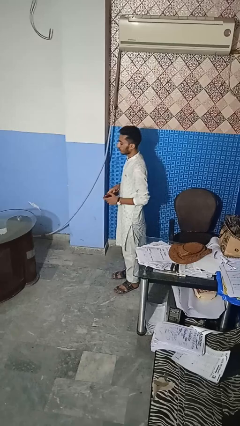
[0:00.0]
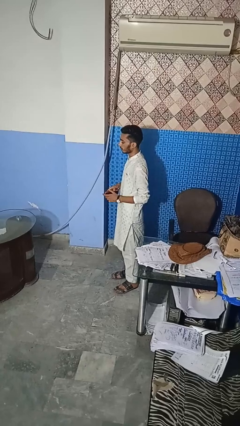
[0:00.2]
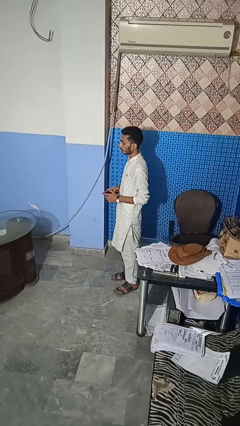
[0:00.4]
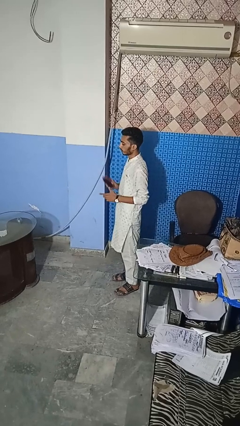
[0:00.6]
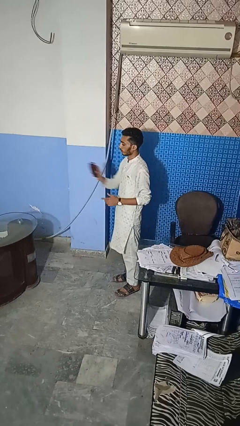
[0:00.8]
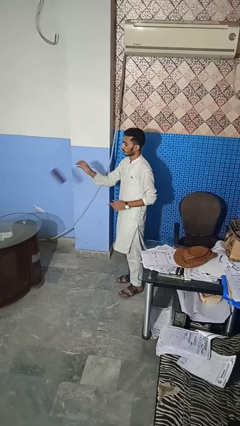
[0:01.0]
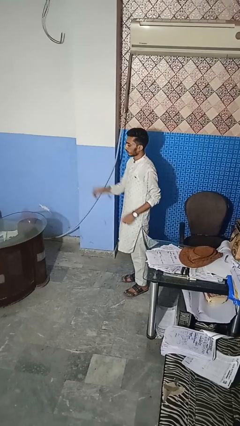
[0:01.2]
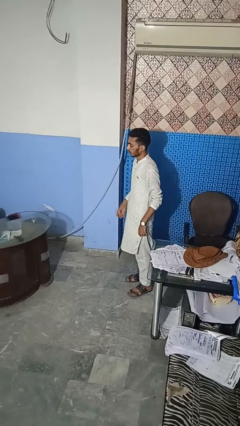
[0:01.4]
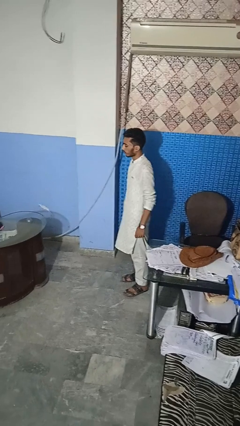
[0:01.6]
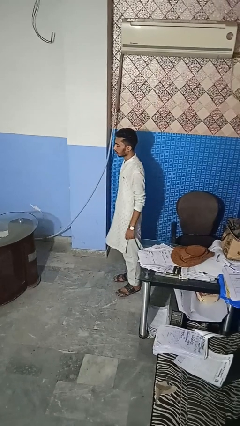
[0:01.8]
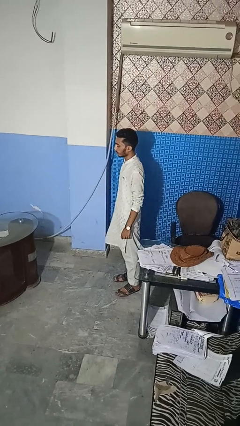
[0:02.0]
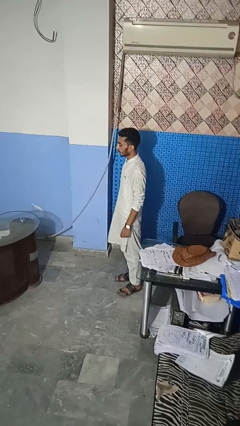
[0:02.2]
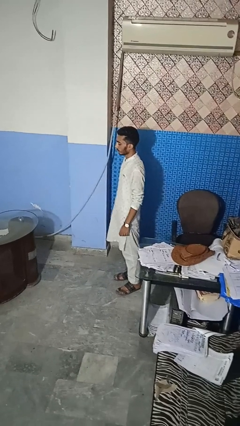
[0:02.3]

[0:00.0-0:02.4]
person throws object on table

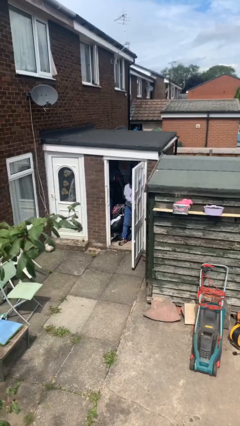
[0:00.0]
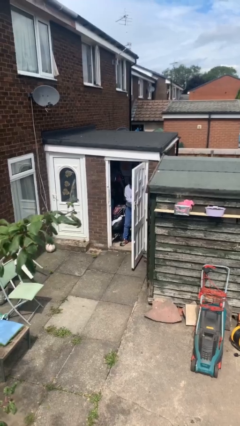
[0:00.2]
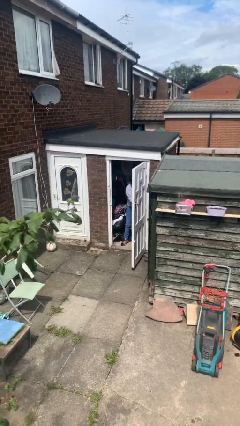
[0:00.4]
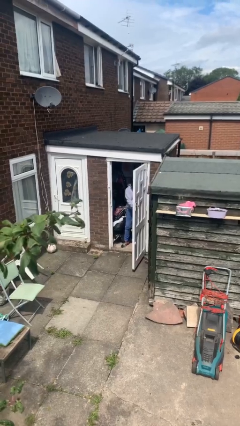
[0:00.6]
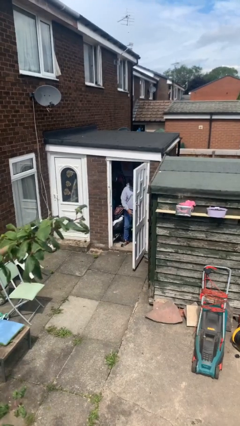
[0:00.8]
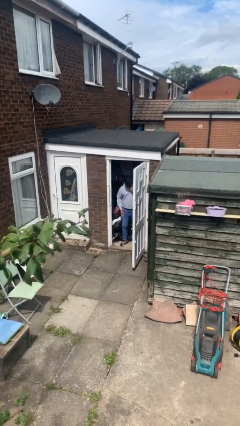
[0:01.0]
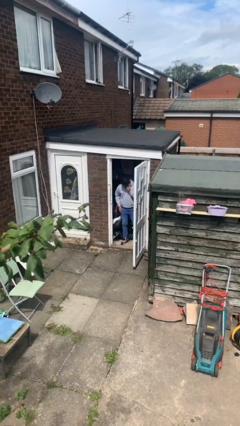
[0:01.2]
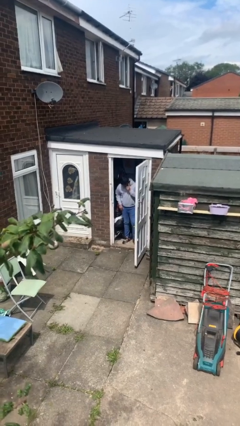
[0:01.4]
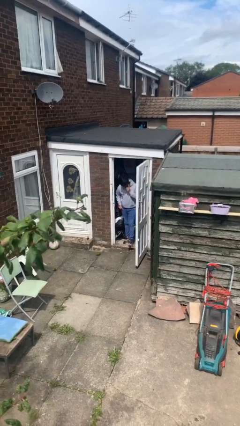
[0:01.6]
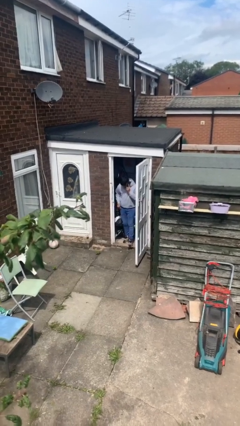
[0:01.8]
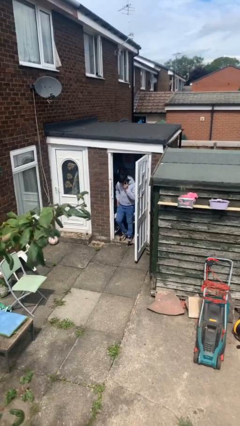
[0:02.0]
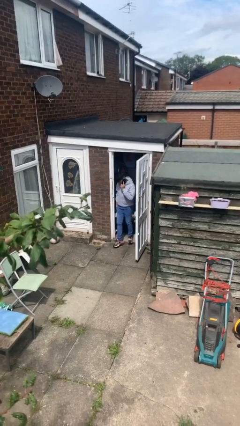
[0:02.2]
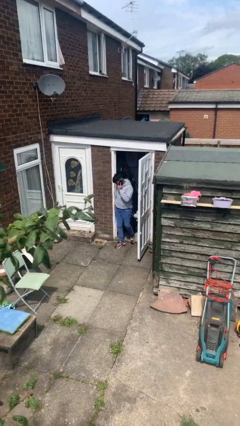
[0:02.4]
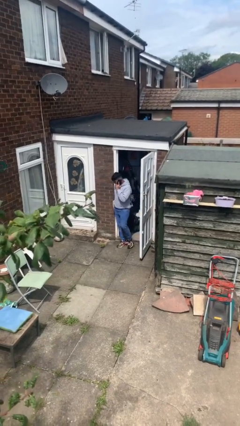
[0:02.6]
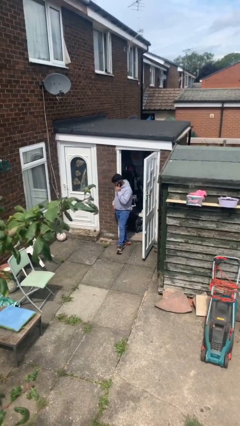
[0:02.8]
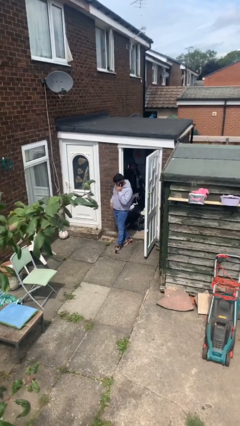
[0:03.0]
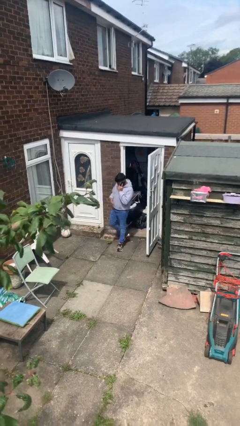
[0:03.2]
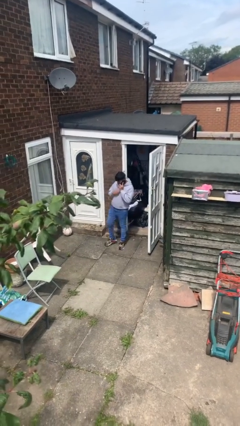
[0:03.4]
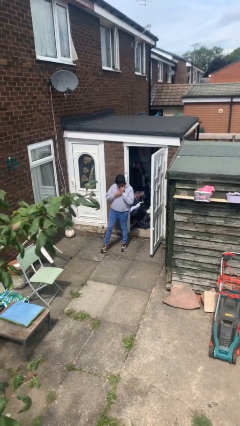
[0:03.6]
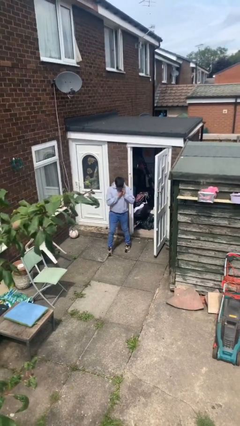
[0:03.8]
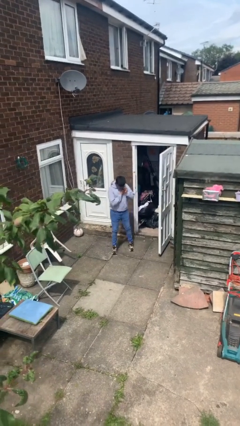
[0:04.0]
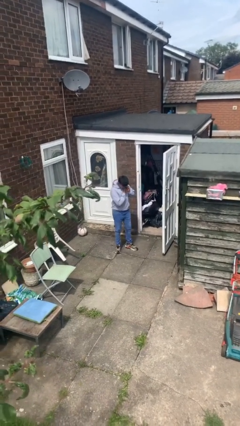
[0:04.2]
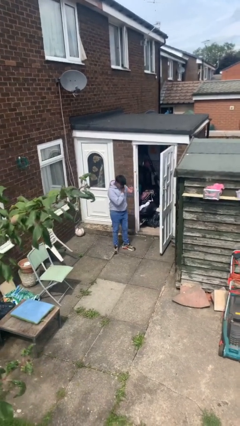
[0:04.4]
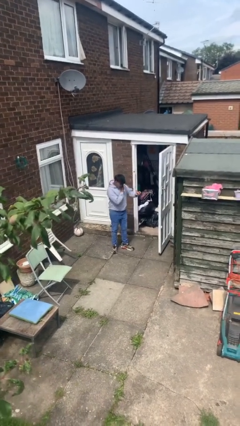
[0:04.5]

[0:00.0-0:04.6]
person enters scene through structure

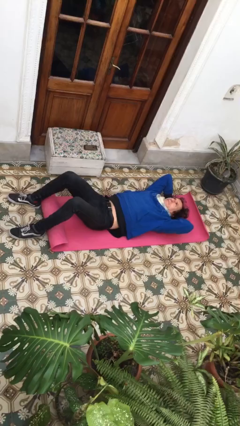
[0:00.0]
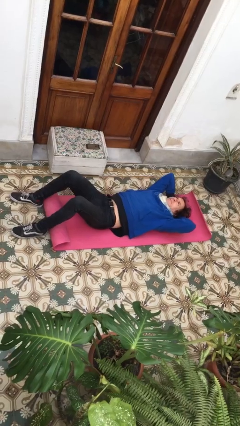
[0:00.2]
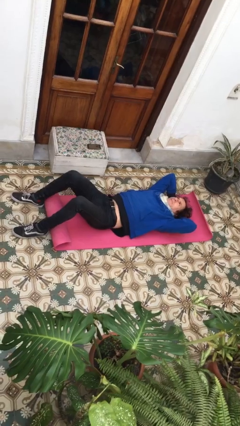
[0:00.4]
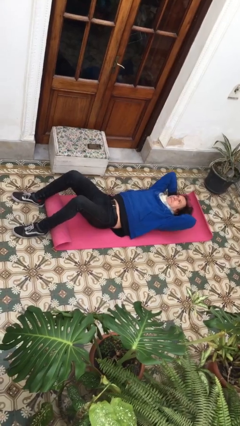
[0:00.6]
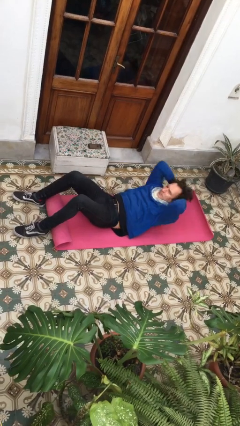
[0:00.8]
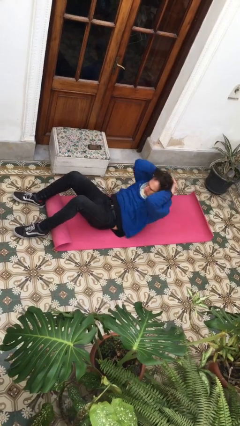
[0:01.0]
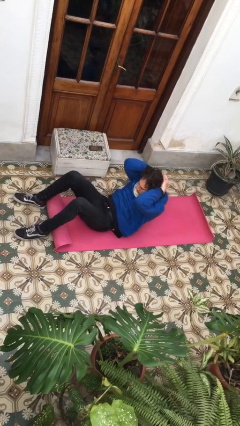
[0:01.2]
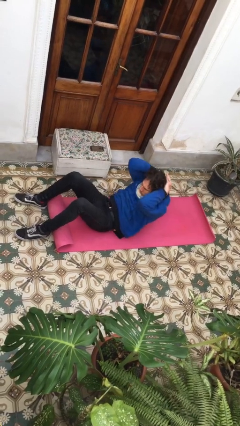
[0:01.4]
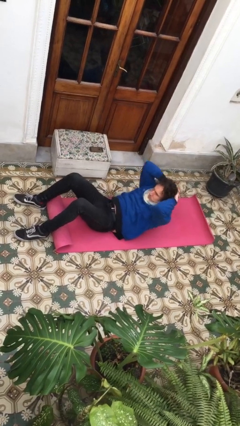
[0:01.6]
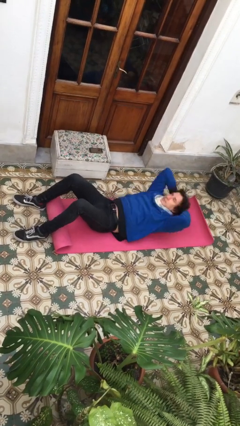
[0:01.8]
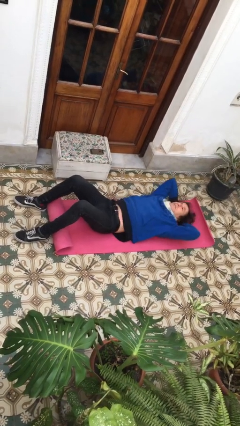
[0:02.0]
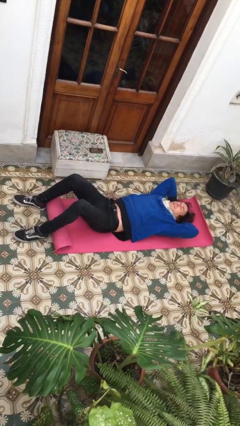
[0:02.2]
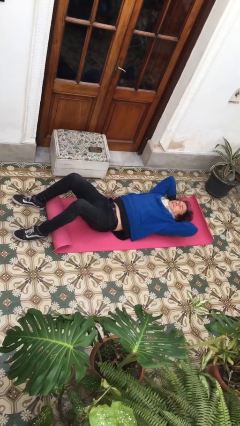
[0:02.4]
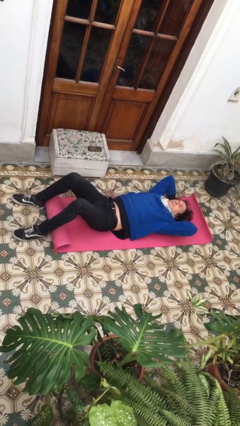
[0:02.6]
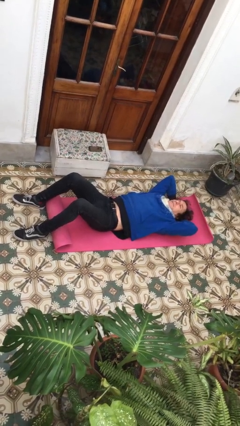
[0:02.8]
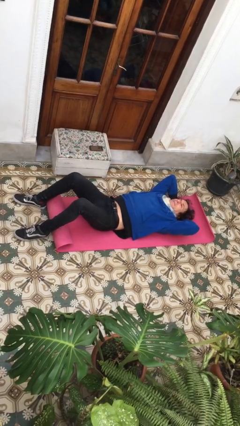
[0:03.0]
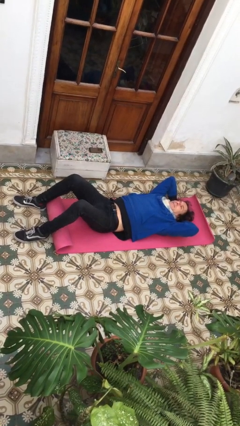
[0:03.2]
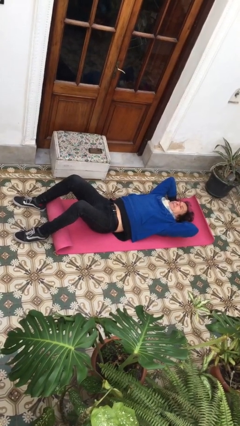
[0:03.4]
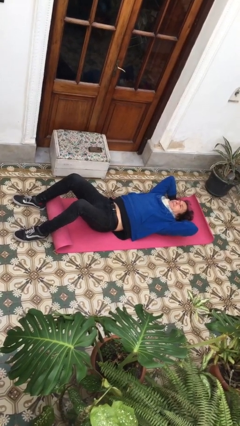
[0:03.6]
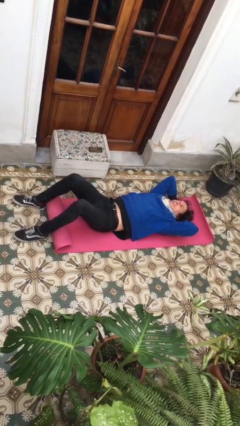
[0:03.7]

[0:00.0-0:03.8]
person exercises with situp

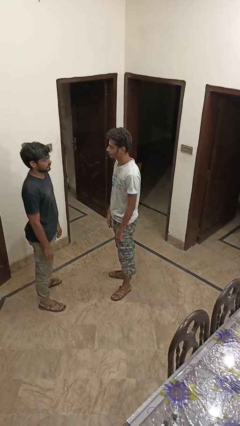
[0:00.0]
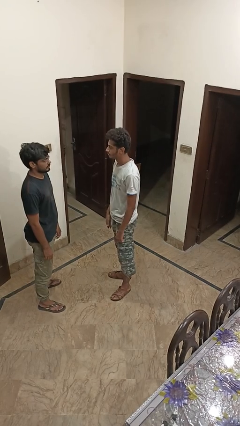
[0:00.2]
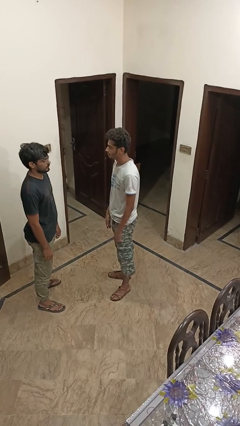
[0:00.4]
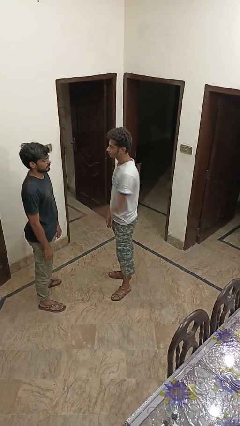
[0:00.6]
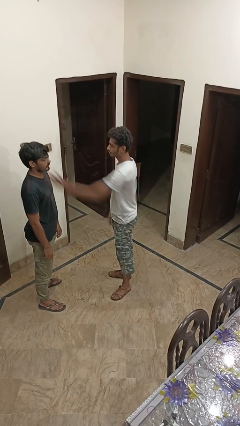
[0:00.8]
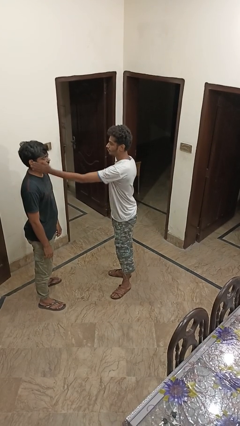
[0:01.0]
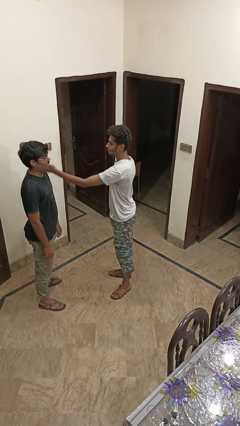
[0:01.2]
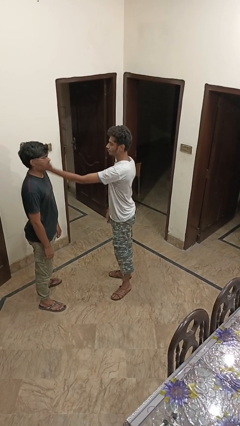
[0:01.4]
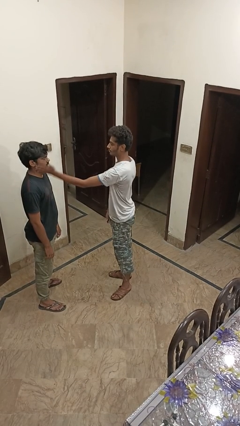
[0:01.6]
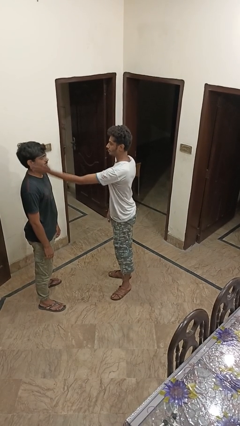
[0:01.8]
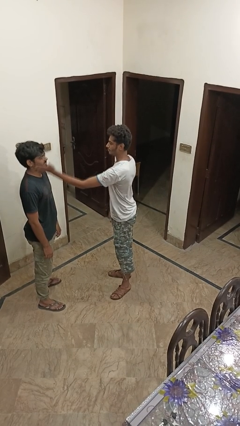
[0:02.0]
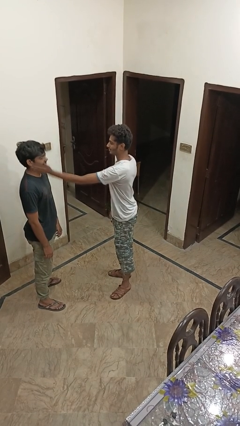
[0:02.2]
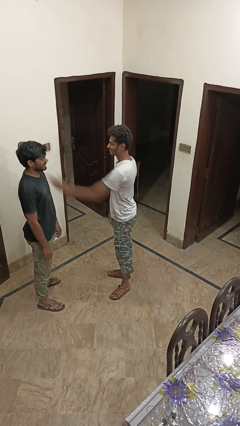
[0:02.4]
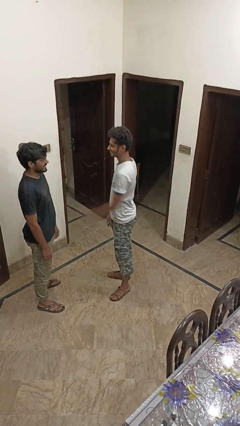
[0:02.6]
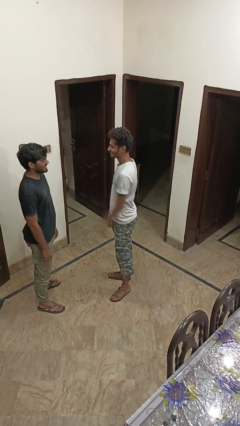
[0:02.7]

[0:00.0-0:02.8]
person touches face of person

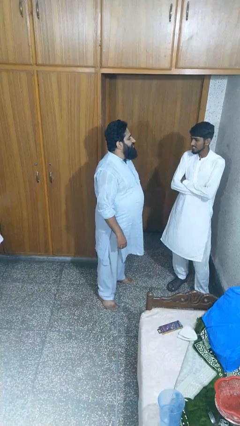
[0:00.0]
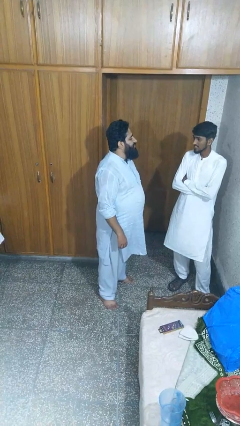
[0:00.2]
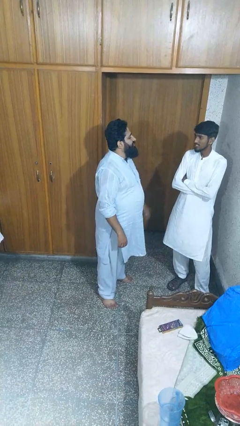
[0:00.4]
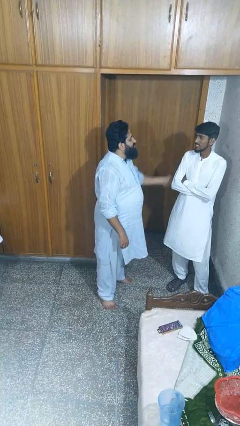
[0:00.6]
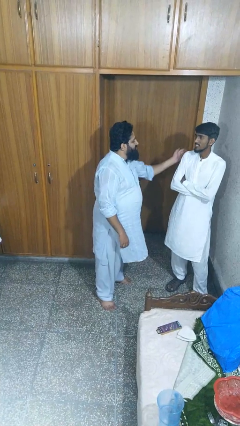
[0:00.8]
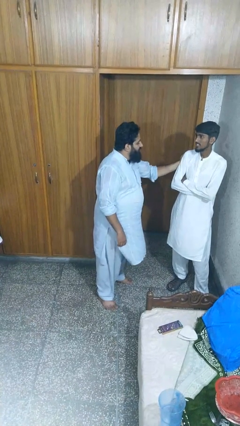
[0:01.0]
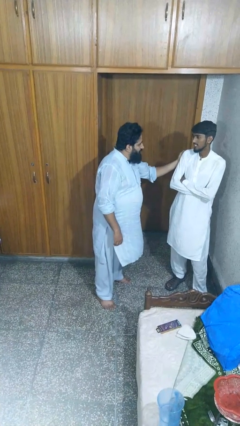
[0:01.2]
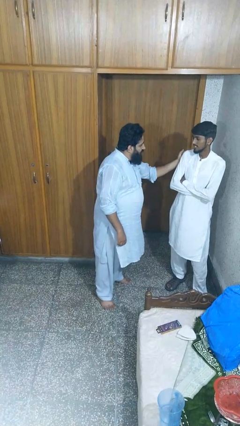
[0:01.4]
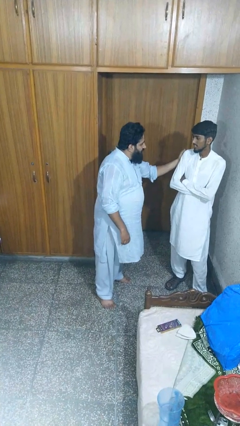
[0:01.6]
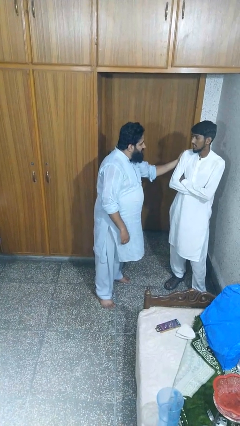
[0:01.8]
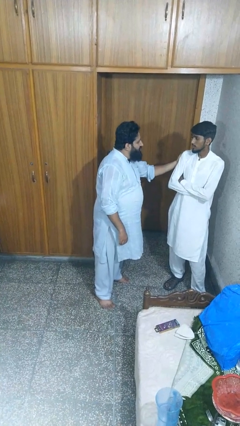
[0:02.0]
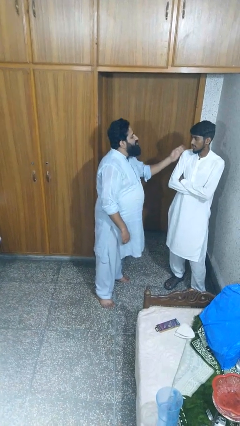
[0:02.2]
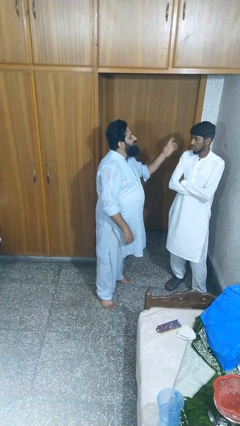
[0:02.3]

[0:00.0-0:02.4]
person pounds shoulders of person

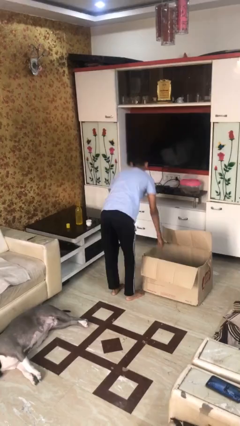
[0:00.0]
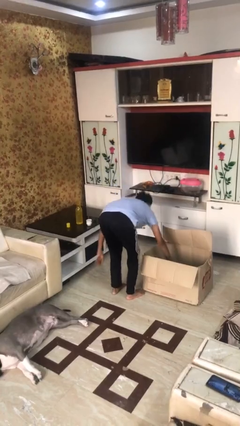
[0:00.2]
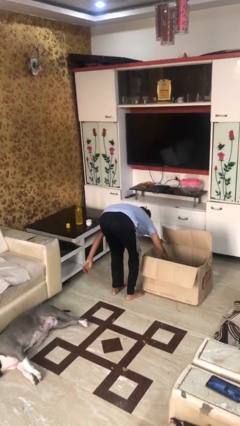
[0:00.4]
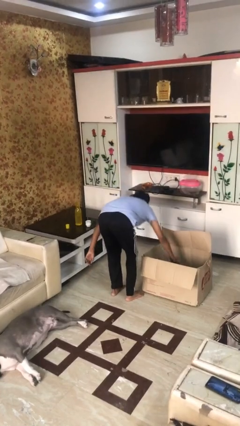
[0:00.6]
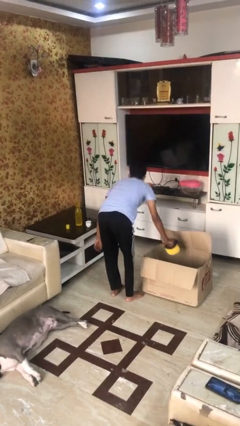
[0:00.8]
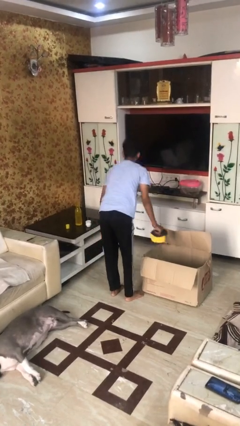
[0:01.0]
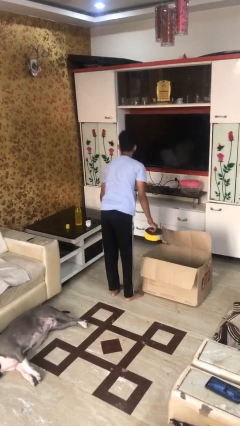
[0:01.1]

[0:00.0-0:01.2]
person takes object from box
